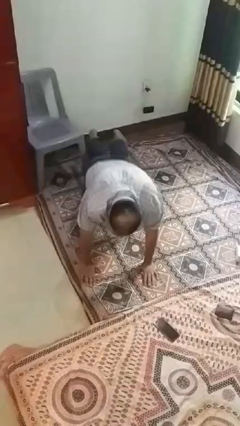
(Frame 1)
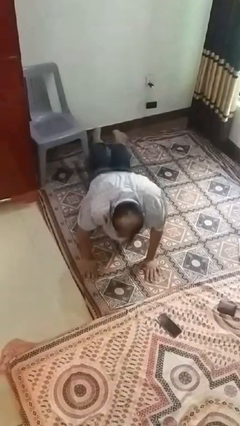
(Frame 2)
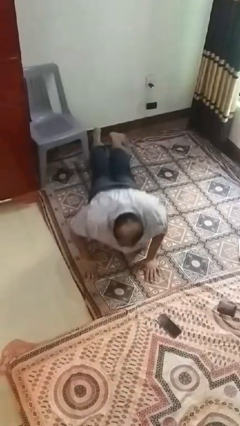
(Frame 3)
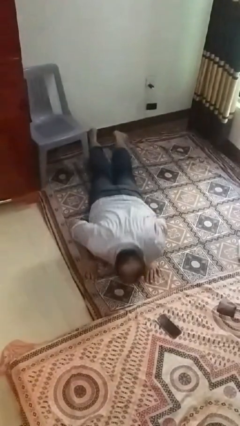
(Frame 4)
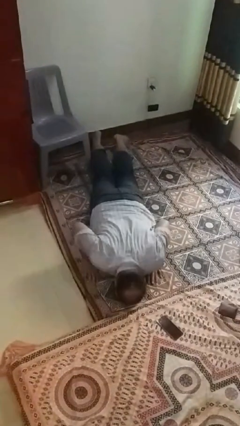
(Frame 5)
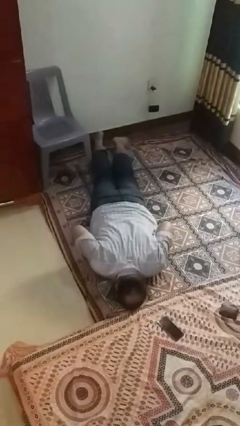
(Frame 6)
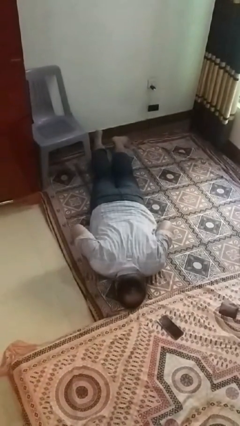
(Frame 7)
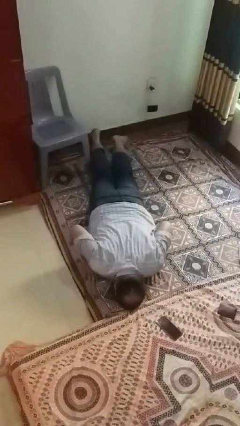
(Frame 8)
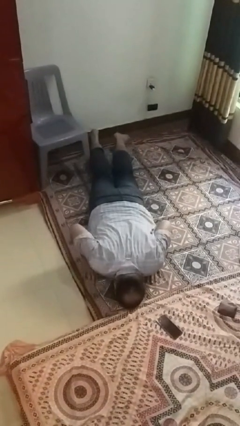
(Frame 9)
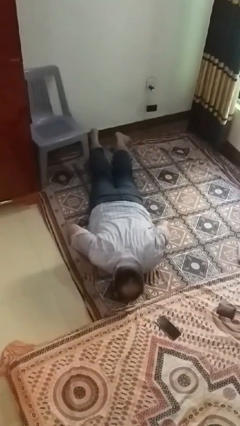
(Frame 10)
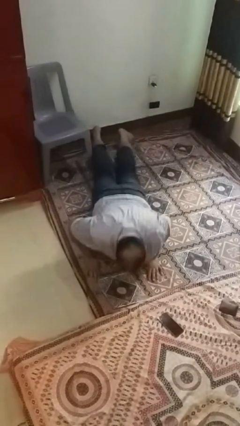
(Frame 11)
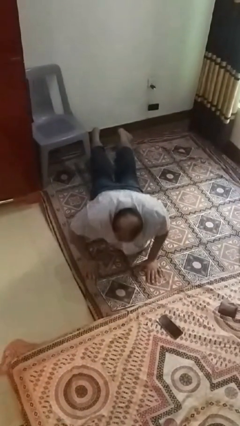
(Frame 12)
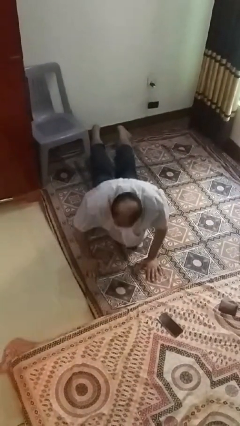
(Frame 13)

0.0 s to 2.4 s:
person exercises with pushup

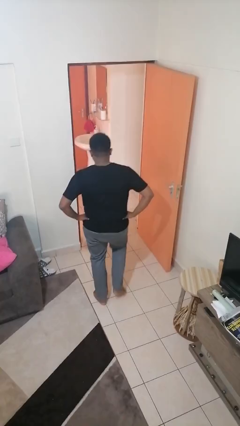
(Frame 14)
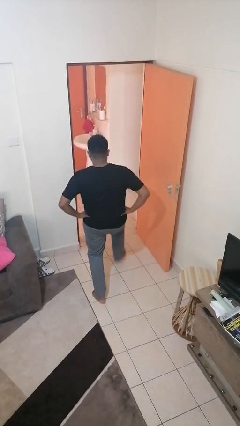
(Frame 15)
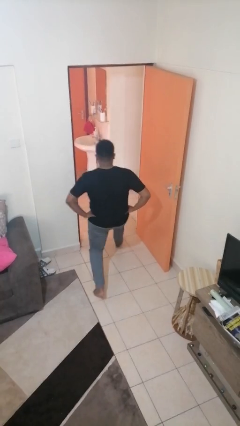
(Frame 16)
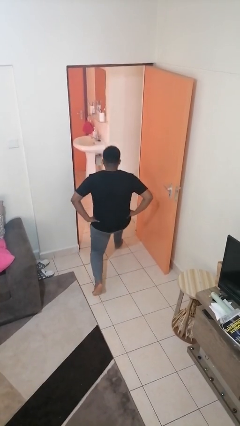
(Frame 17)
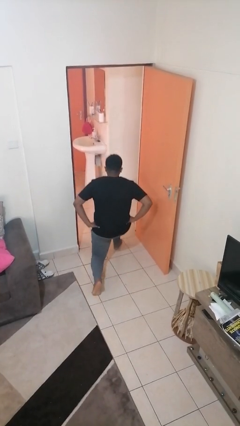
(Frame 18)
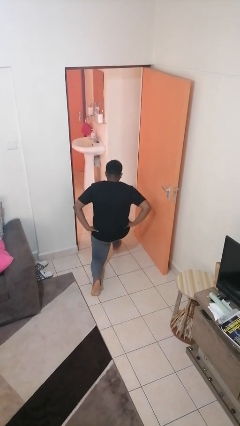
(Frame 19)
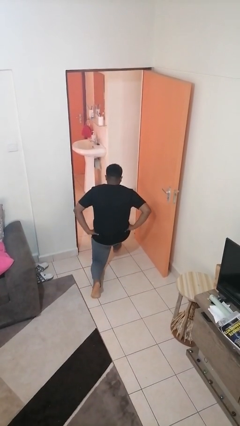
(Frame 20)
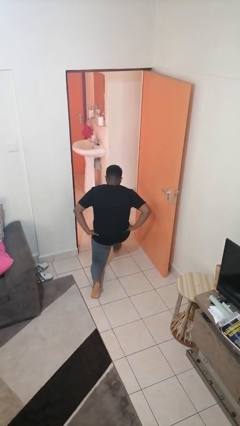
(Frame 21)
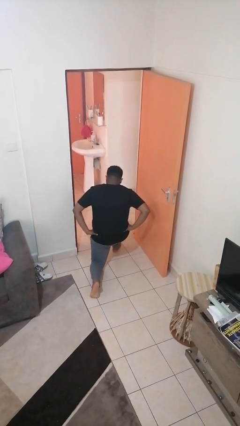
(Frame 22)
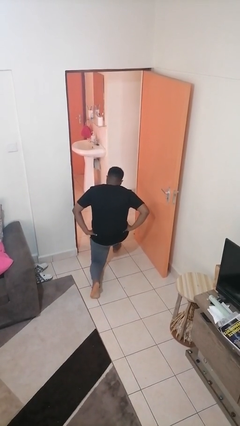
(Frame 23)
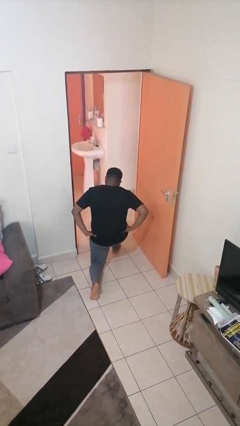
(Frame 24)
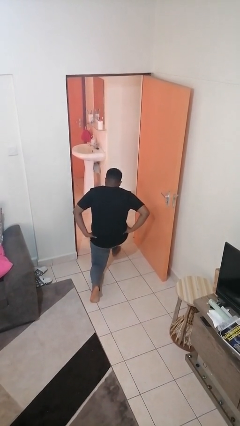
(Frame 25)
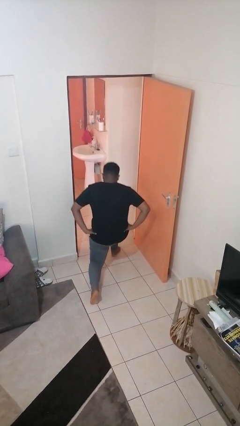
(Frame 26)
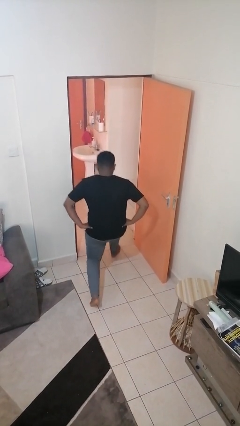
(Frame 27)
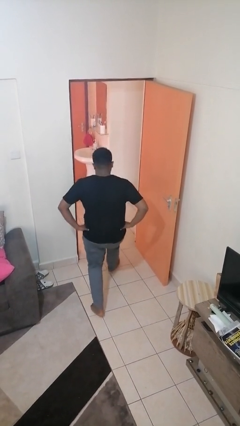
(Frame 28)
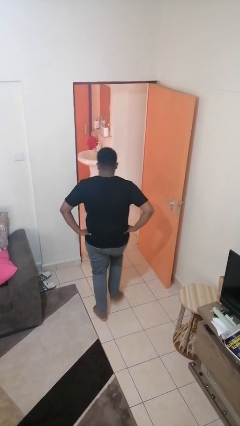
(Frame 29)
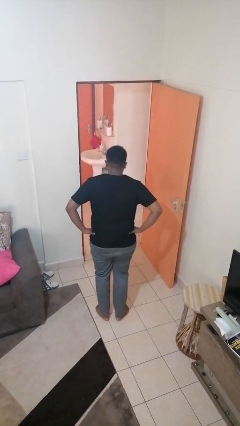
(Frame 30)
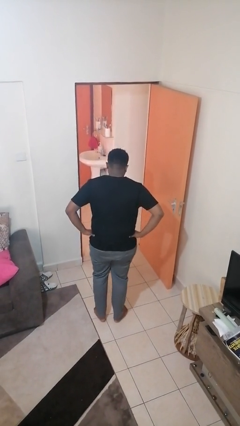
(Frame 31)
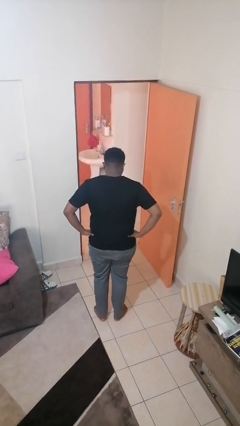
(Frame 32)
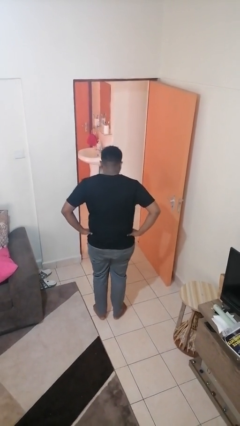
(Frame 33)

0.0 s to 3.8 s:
person exercises with lunges

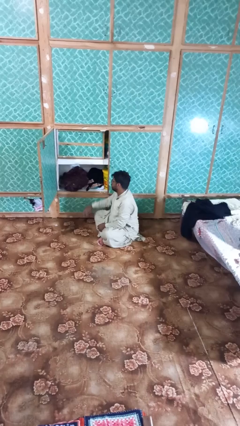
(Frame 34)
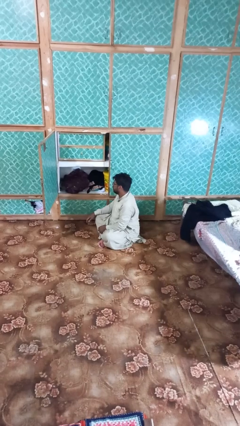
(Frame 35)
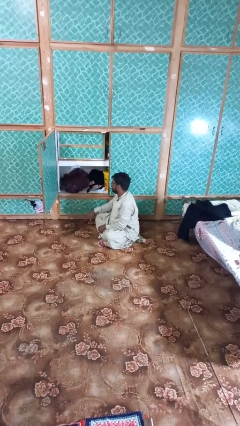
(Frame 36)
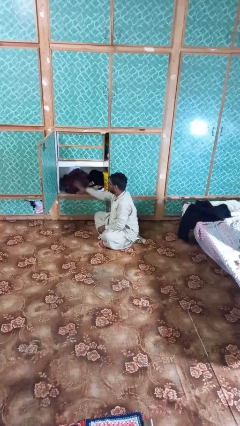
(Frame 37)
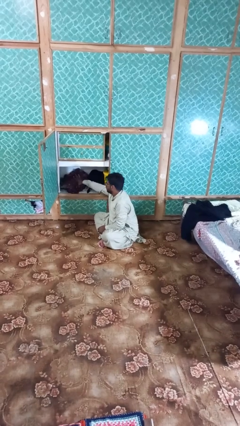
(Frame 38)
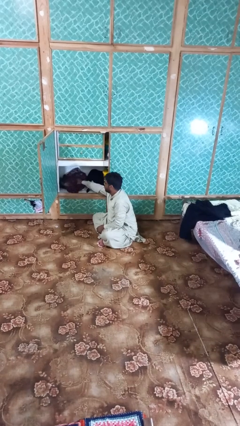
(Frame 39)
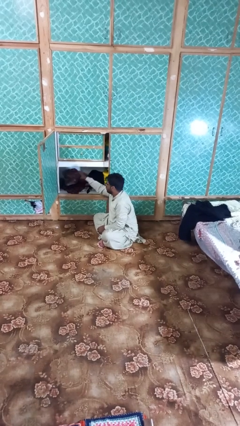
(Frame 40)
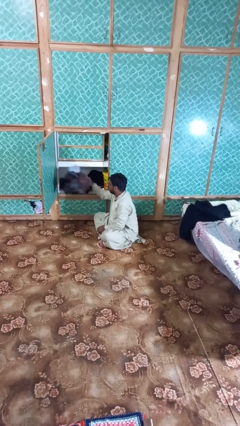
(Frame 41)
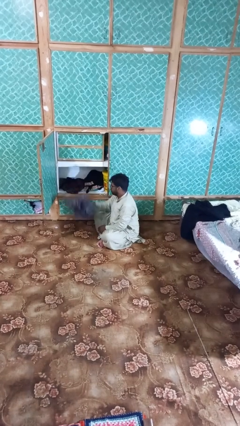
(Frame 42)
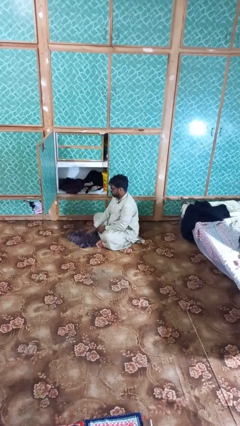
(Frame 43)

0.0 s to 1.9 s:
person takes clothes from dresser

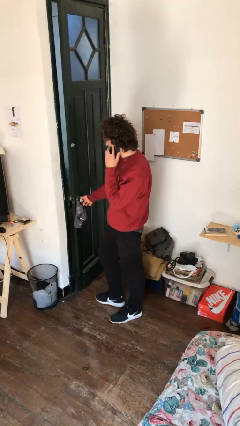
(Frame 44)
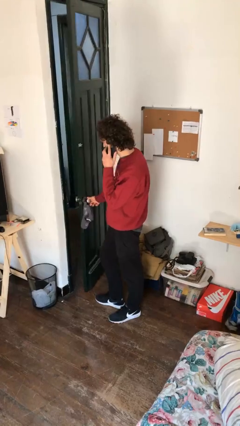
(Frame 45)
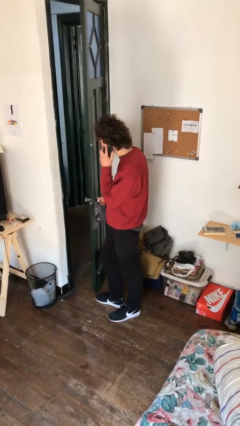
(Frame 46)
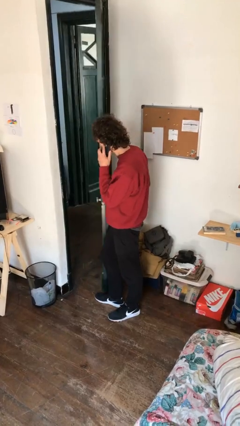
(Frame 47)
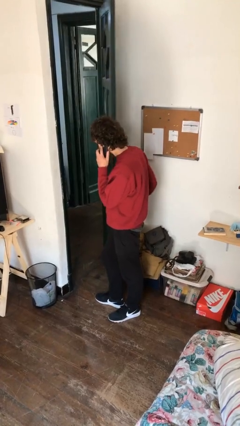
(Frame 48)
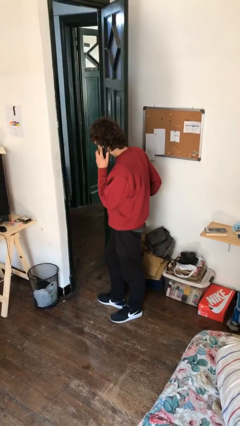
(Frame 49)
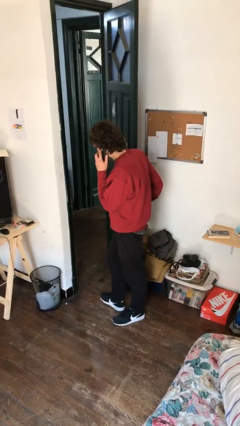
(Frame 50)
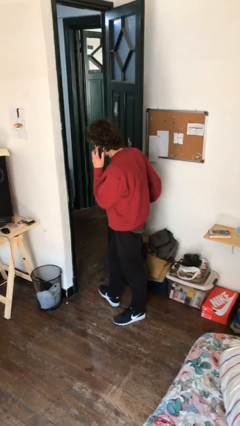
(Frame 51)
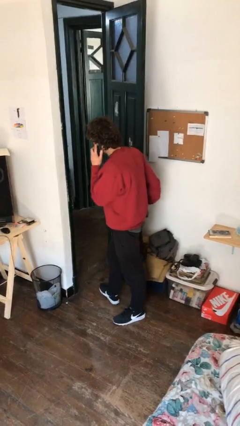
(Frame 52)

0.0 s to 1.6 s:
person opens facility door

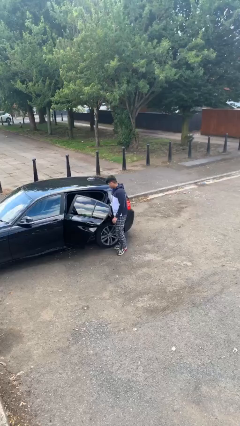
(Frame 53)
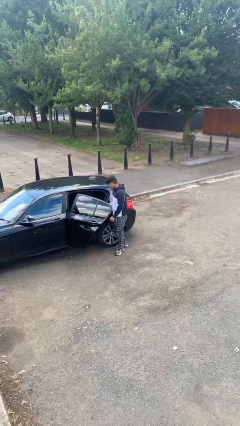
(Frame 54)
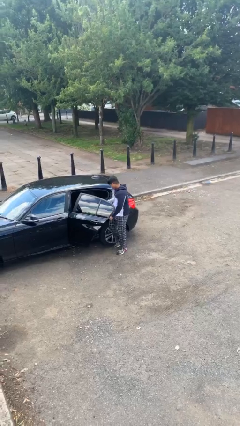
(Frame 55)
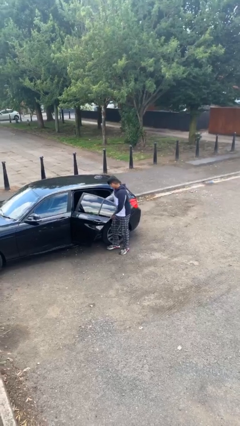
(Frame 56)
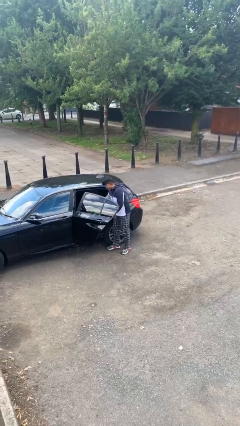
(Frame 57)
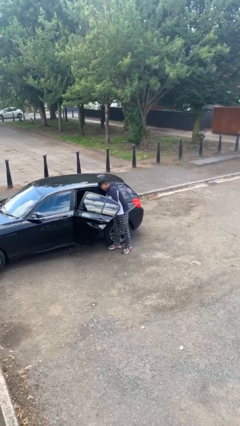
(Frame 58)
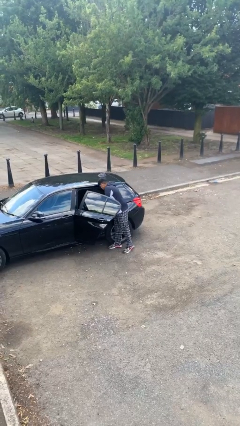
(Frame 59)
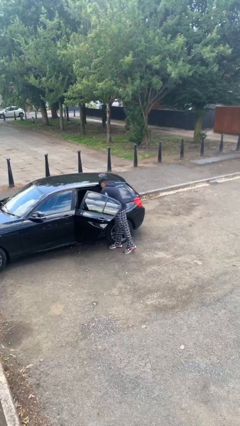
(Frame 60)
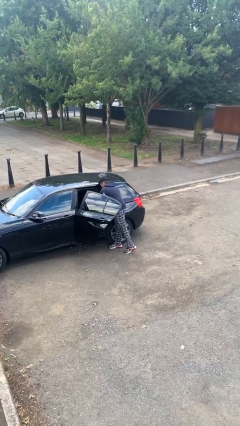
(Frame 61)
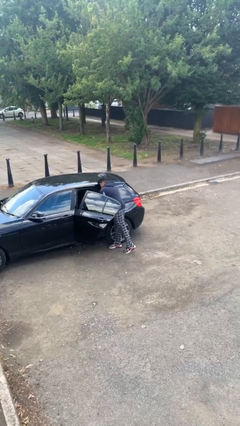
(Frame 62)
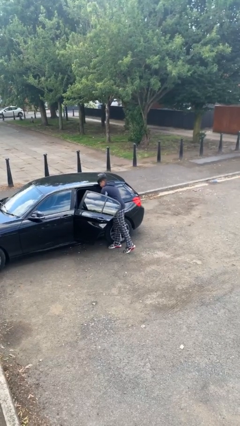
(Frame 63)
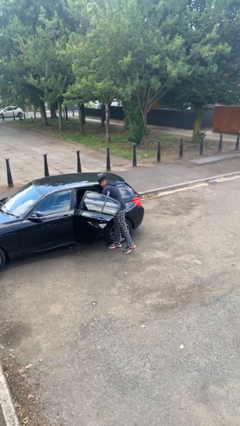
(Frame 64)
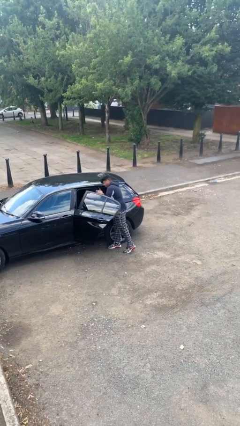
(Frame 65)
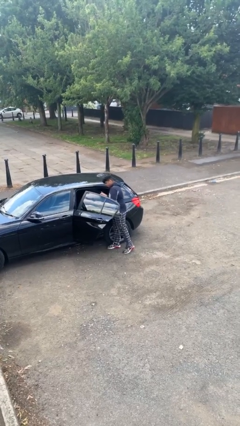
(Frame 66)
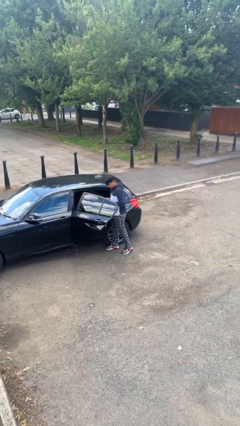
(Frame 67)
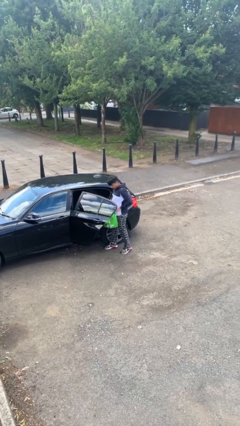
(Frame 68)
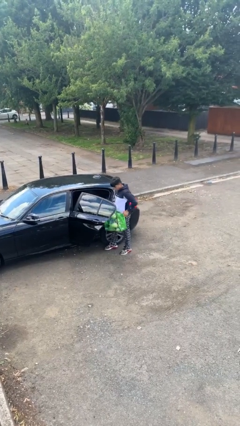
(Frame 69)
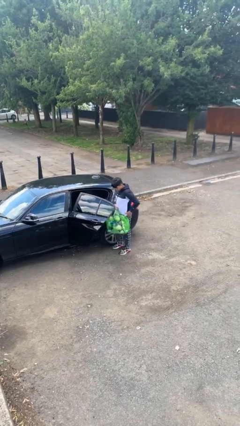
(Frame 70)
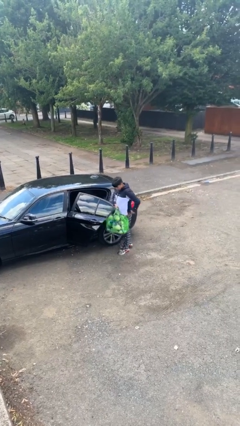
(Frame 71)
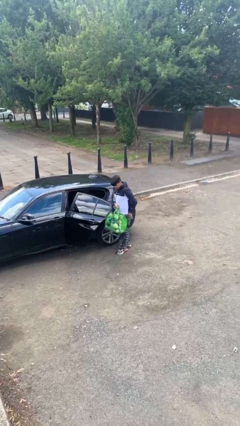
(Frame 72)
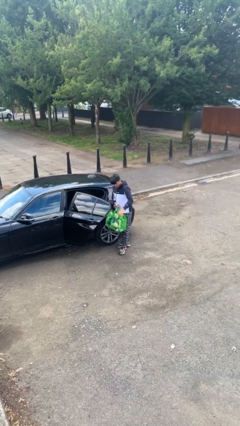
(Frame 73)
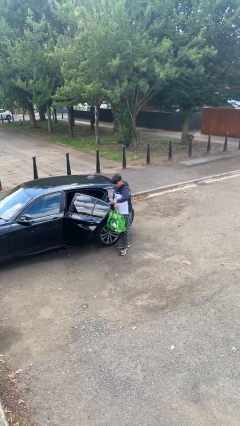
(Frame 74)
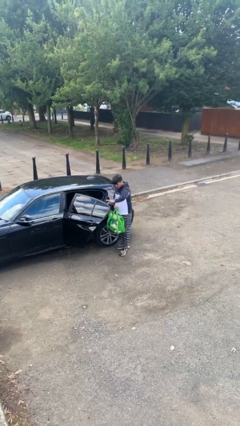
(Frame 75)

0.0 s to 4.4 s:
person unloads car

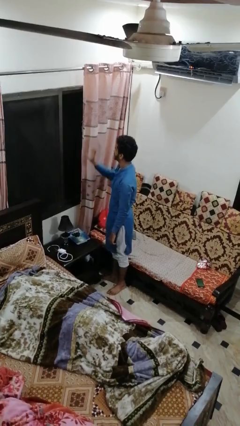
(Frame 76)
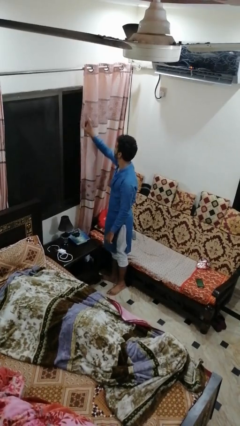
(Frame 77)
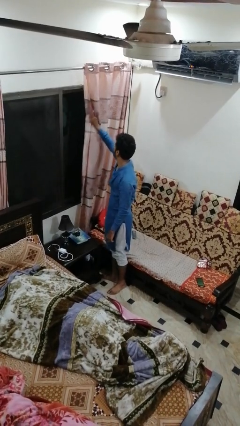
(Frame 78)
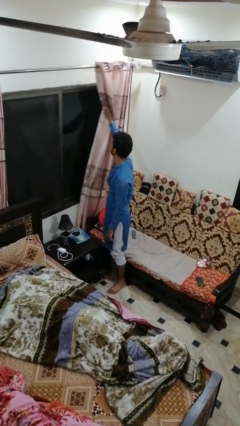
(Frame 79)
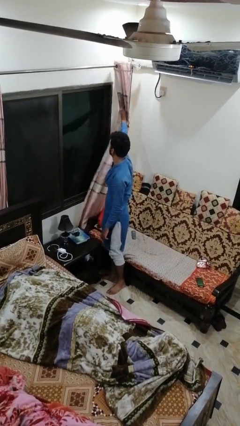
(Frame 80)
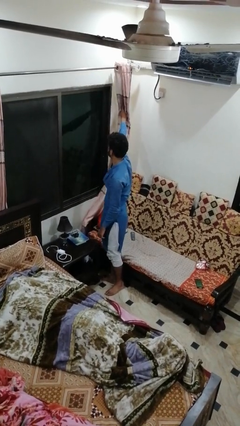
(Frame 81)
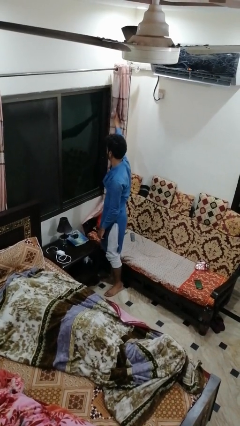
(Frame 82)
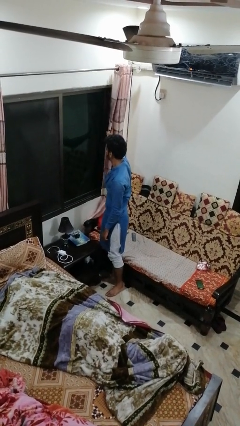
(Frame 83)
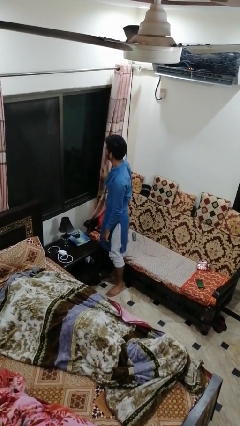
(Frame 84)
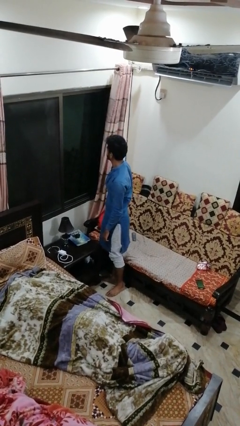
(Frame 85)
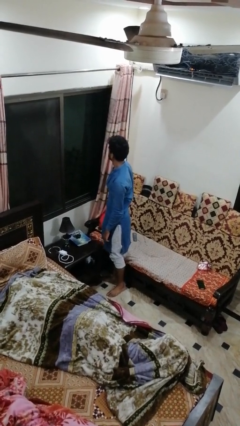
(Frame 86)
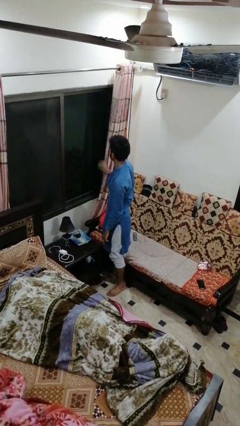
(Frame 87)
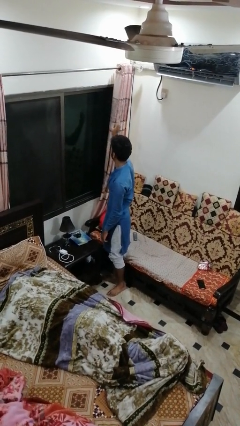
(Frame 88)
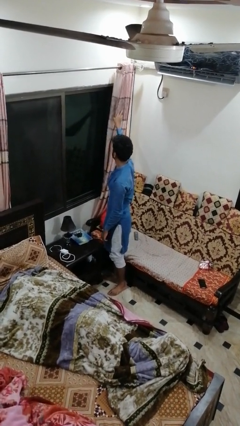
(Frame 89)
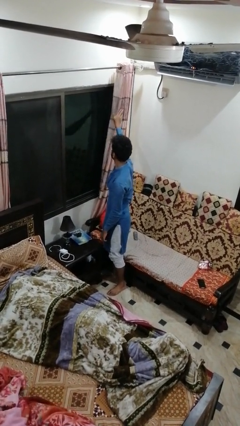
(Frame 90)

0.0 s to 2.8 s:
person opens curtains

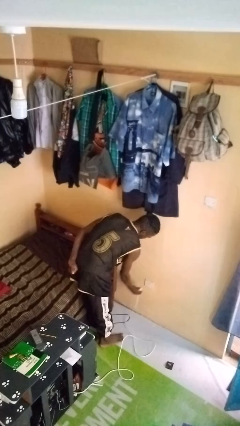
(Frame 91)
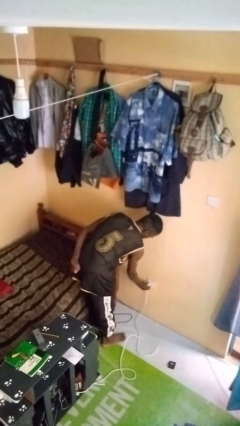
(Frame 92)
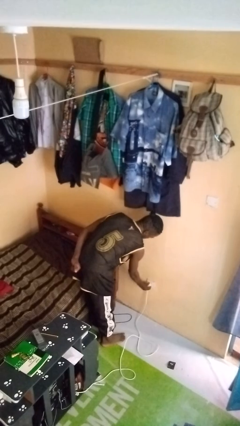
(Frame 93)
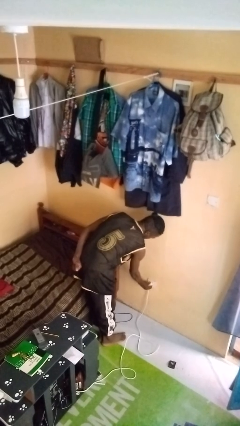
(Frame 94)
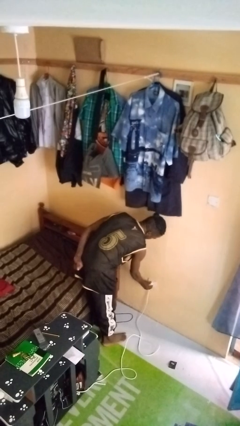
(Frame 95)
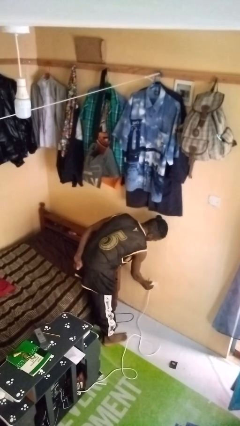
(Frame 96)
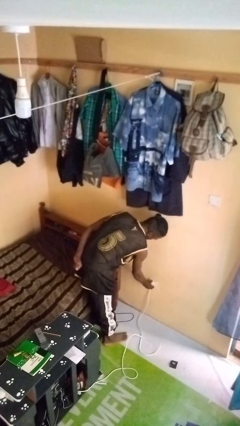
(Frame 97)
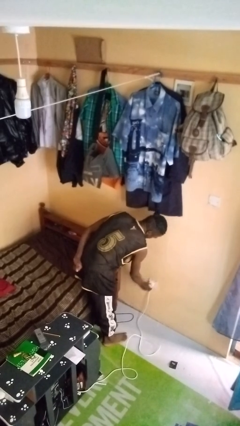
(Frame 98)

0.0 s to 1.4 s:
person plugs into electrical socket
